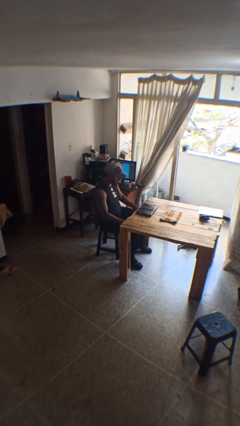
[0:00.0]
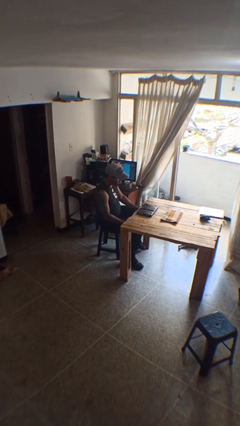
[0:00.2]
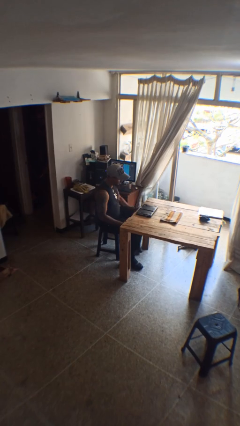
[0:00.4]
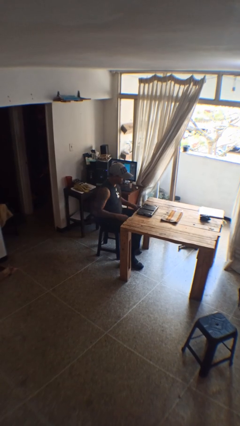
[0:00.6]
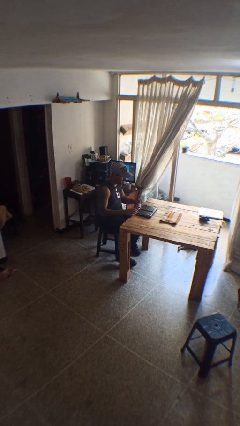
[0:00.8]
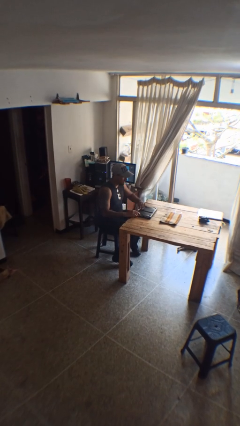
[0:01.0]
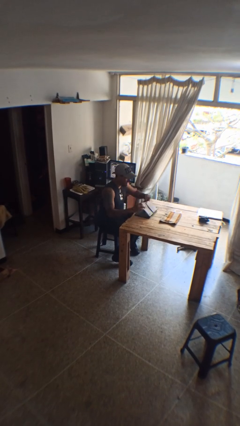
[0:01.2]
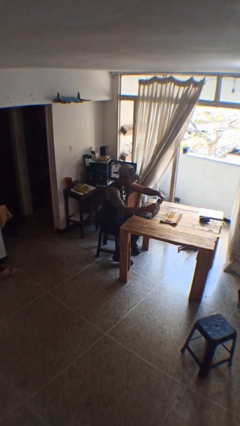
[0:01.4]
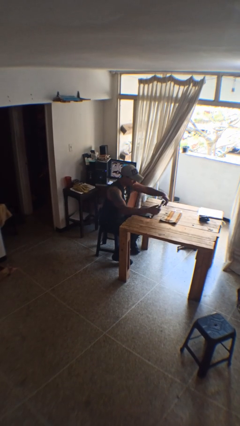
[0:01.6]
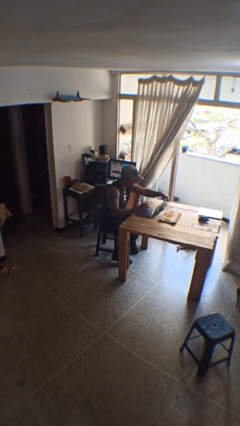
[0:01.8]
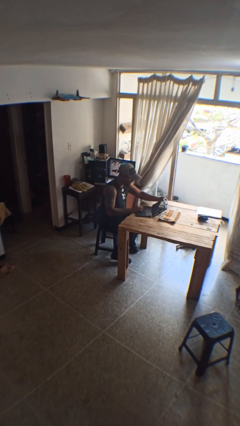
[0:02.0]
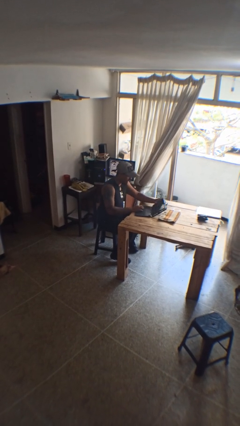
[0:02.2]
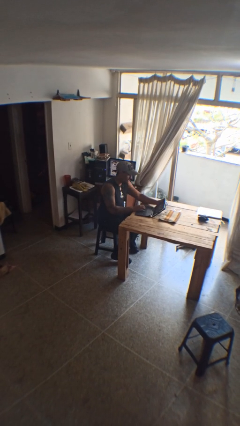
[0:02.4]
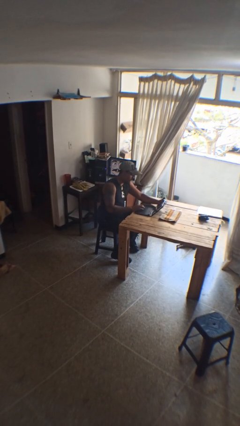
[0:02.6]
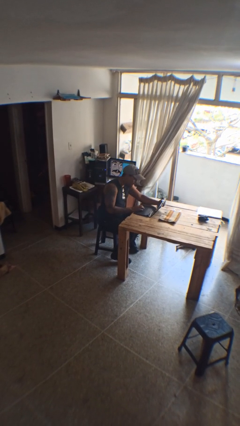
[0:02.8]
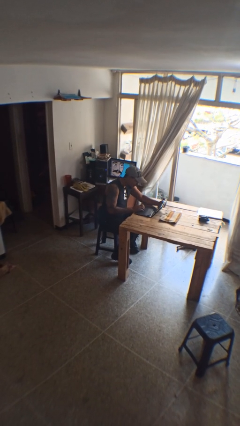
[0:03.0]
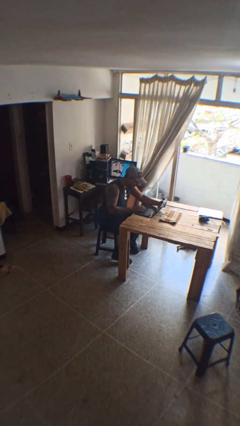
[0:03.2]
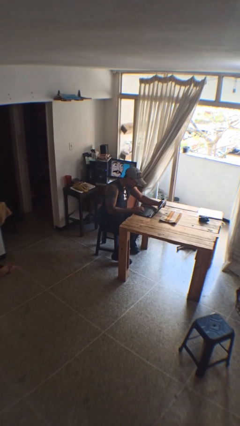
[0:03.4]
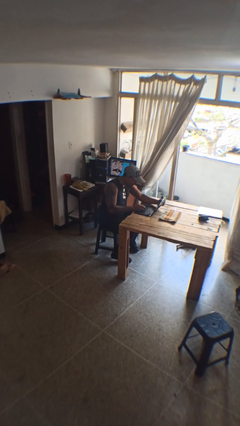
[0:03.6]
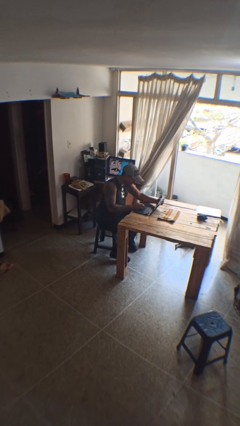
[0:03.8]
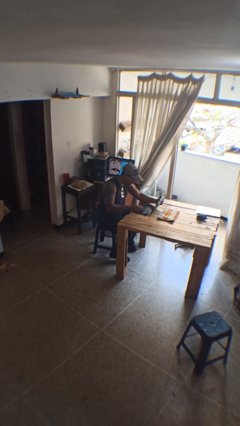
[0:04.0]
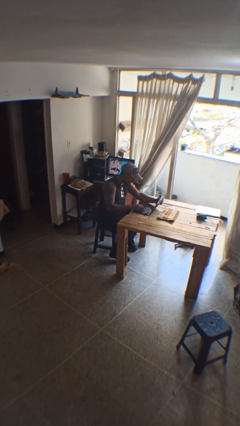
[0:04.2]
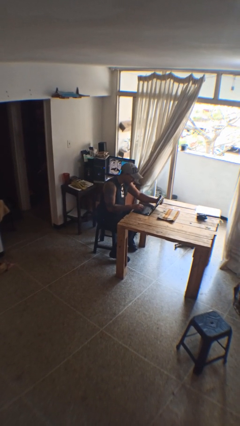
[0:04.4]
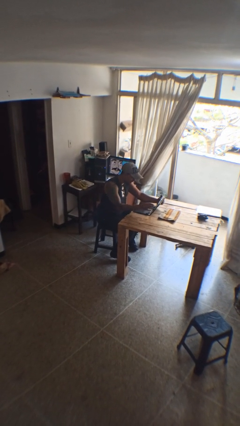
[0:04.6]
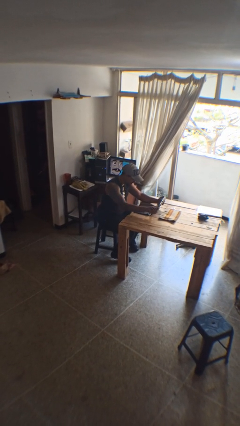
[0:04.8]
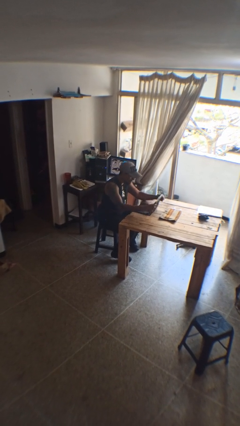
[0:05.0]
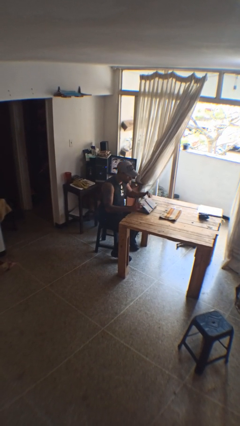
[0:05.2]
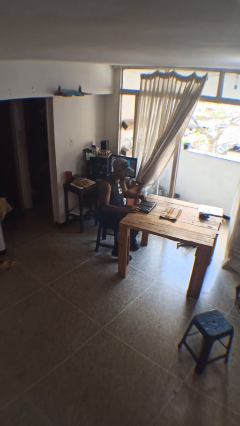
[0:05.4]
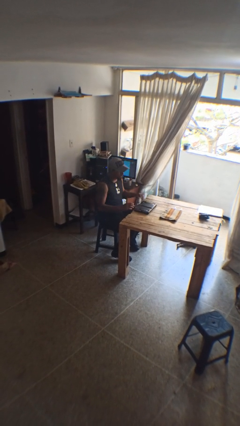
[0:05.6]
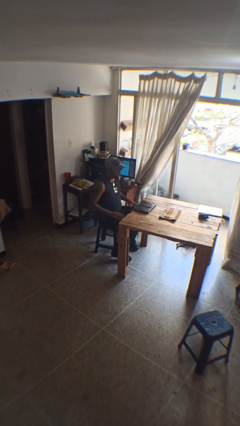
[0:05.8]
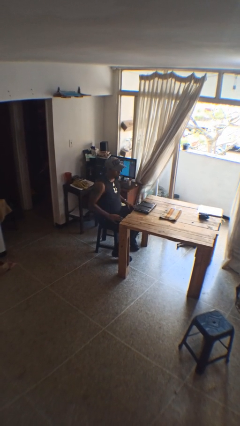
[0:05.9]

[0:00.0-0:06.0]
person interacts with laptop

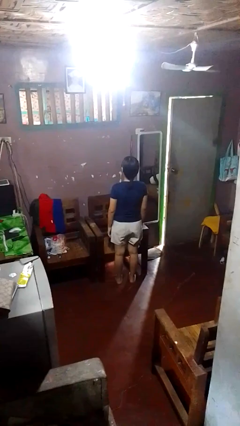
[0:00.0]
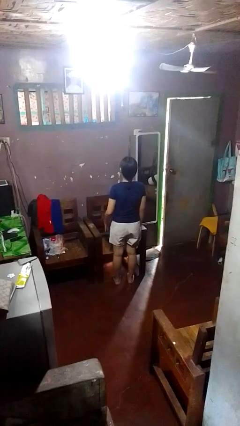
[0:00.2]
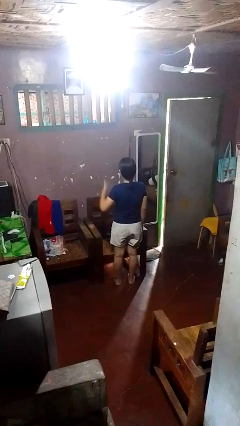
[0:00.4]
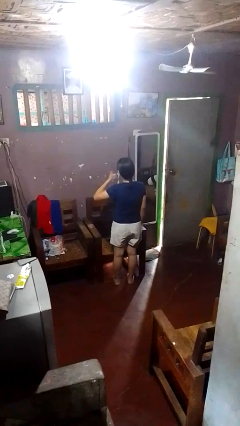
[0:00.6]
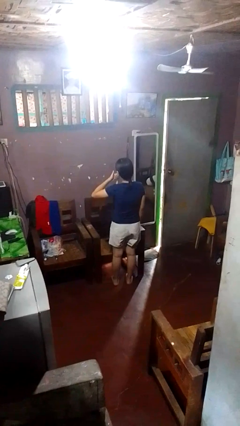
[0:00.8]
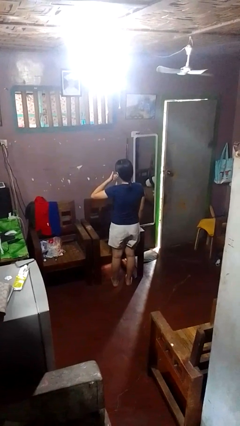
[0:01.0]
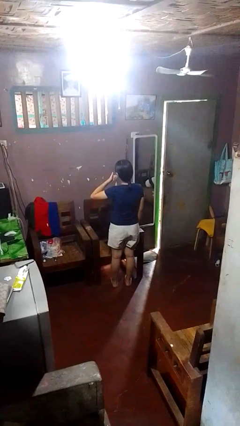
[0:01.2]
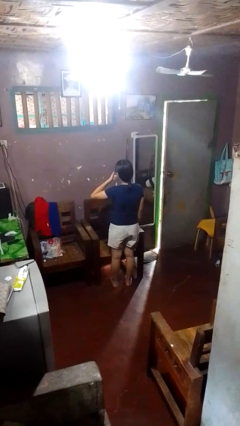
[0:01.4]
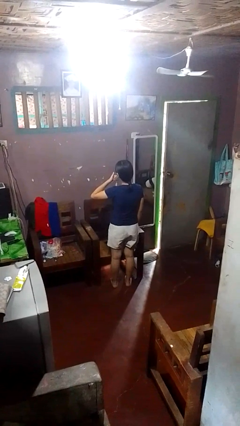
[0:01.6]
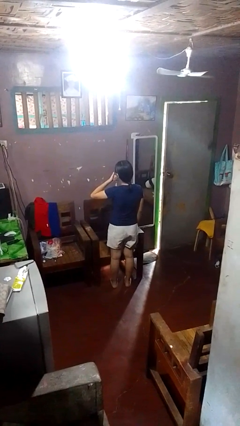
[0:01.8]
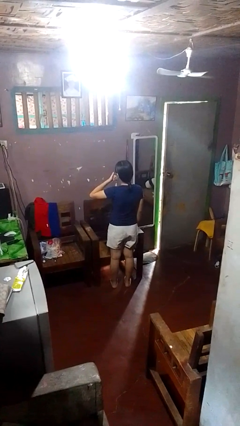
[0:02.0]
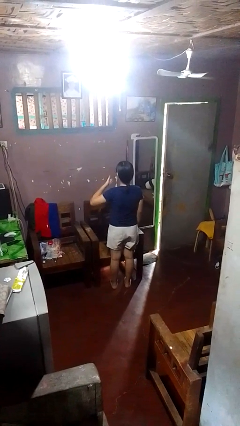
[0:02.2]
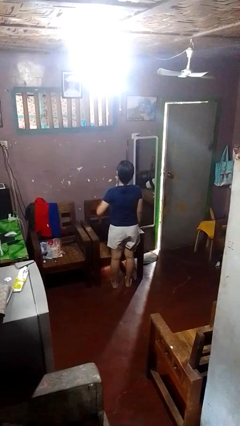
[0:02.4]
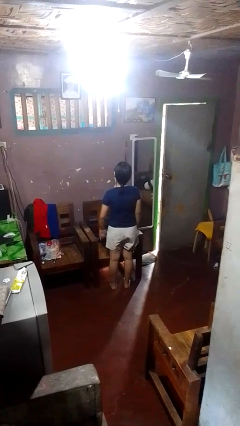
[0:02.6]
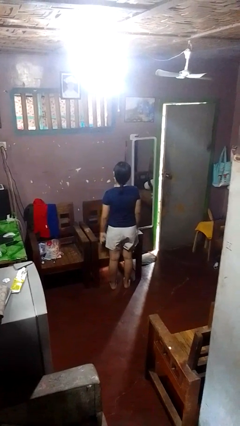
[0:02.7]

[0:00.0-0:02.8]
person gestures call me

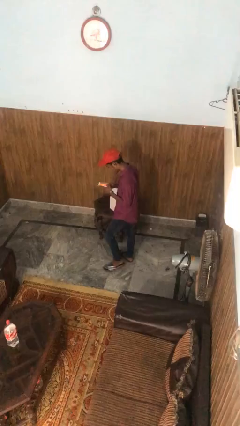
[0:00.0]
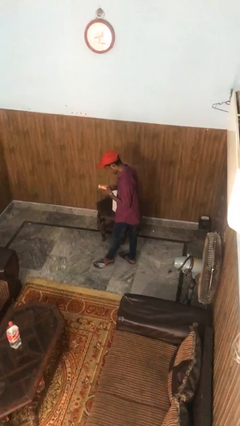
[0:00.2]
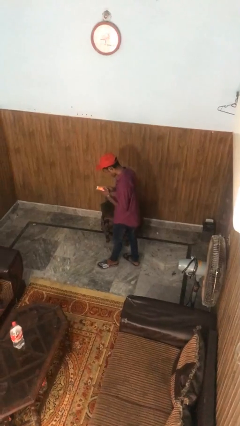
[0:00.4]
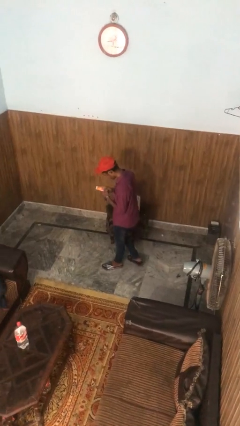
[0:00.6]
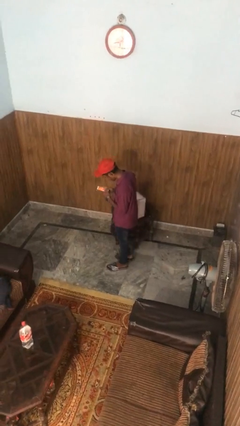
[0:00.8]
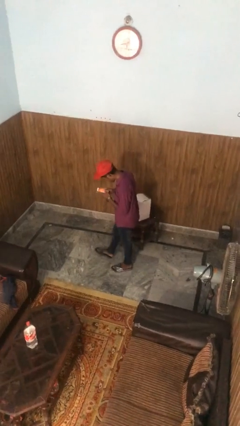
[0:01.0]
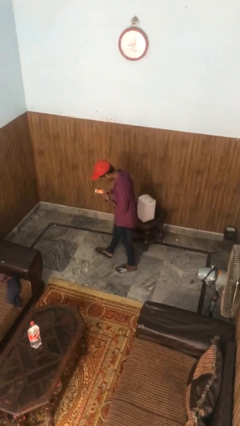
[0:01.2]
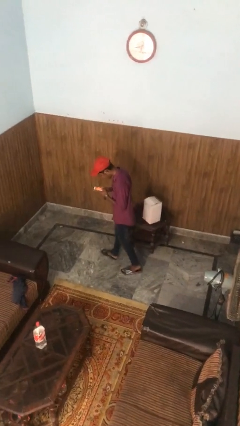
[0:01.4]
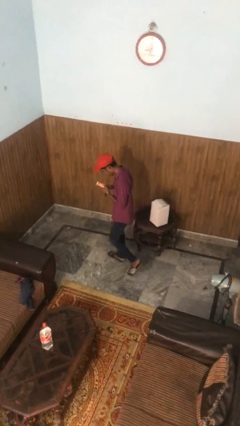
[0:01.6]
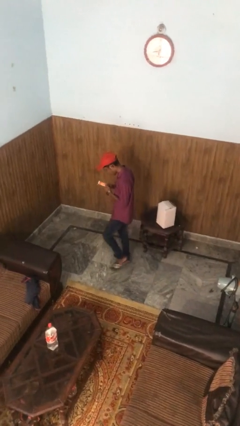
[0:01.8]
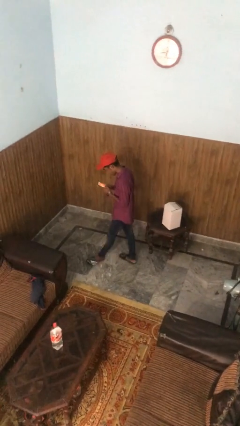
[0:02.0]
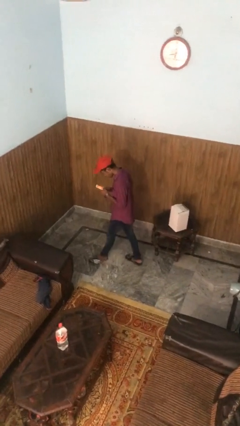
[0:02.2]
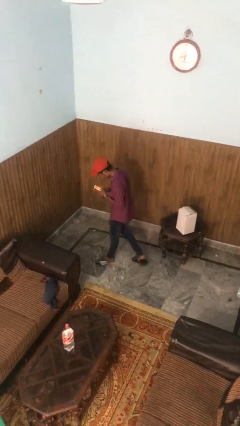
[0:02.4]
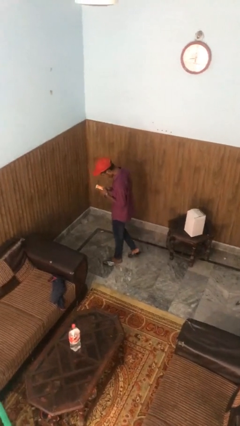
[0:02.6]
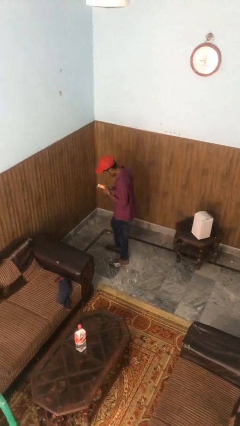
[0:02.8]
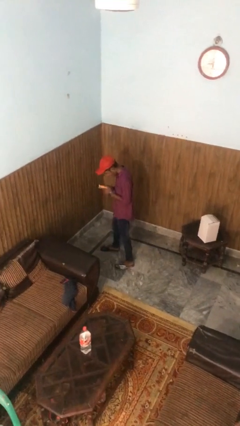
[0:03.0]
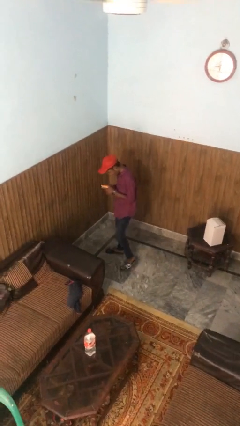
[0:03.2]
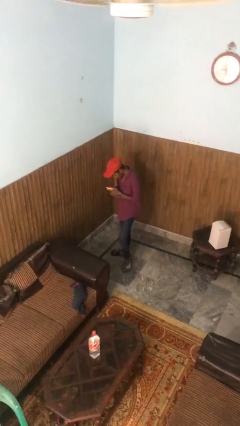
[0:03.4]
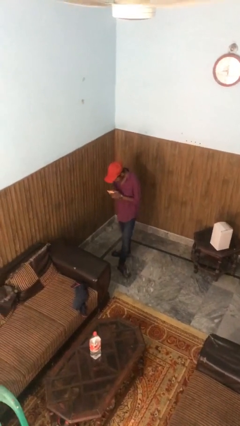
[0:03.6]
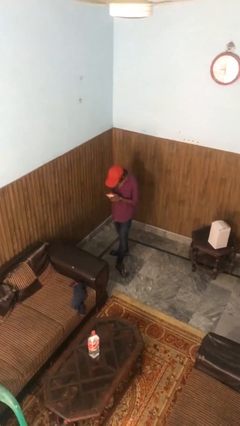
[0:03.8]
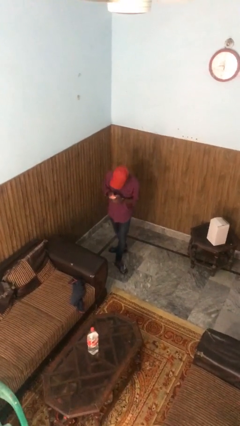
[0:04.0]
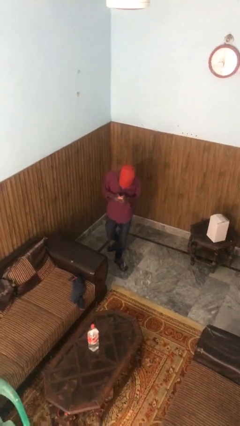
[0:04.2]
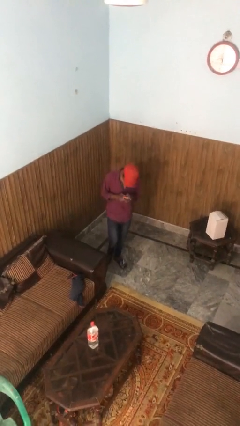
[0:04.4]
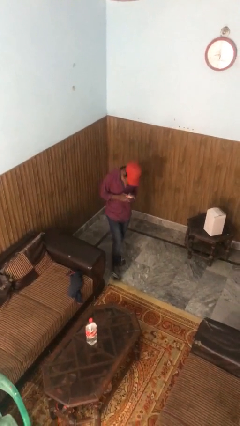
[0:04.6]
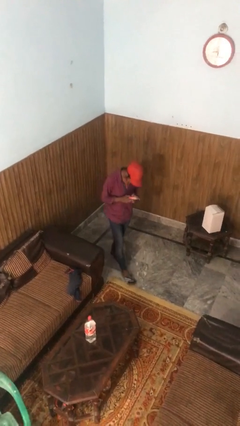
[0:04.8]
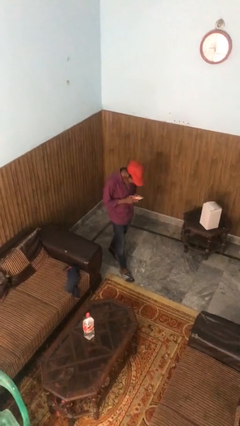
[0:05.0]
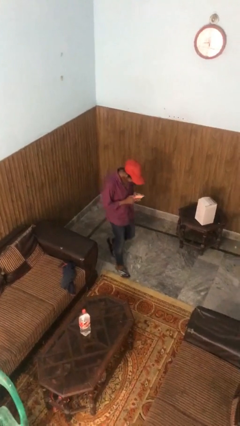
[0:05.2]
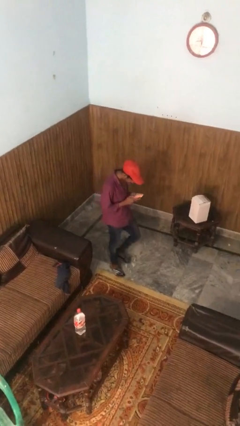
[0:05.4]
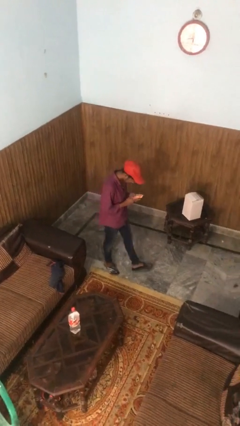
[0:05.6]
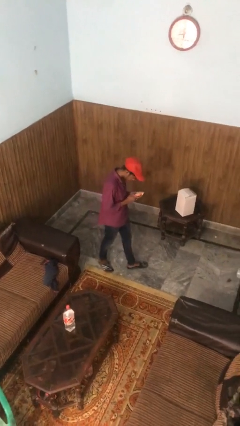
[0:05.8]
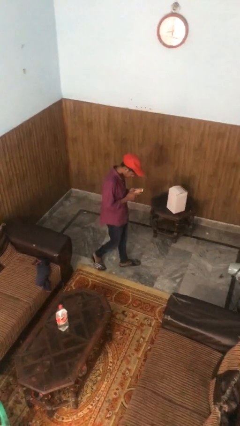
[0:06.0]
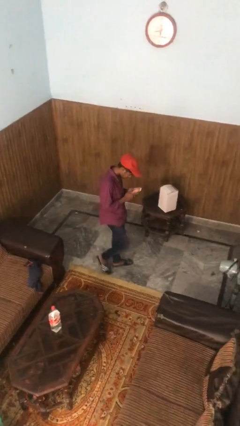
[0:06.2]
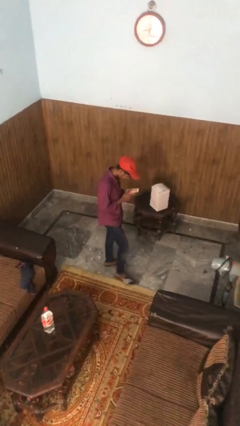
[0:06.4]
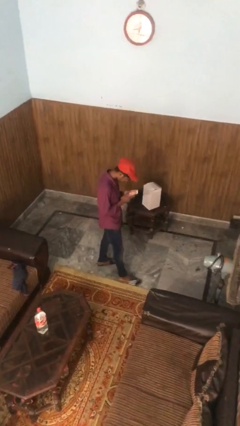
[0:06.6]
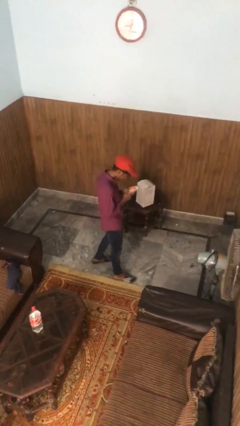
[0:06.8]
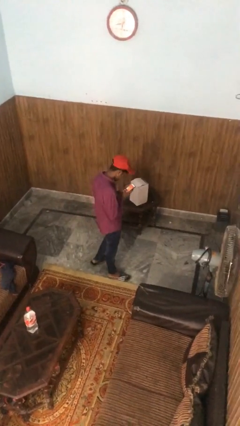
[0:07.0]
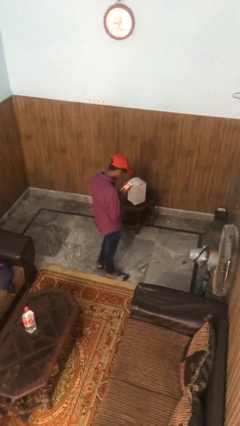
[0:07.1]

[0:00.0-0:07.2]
person texts on phone

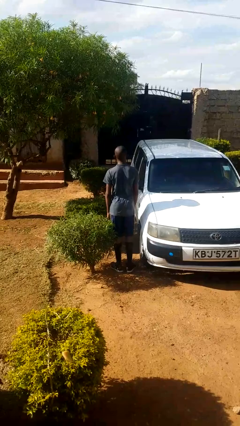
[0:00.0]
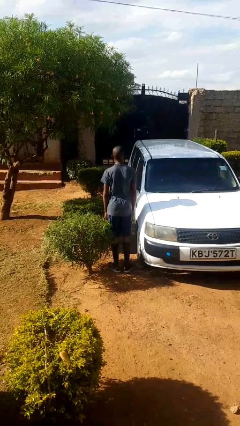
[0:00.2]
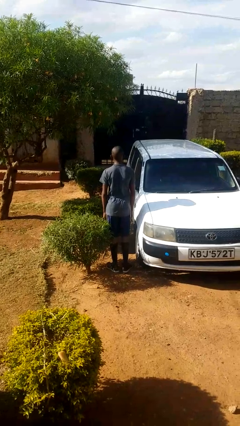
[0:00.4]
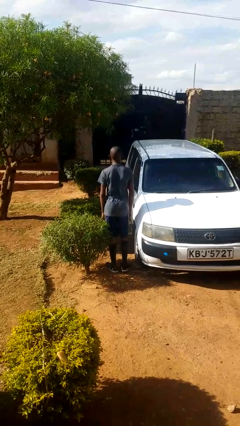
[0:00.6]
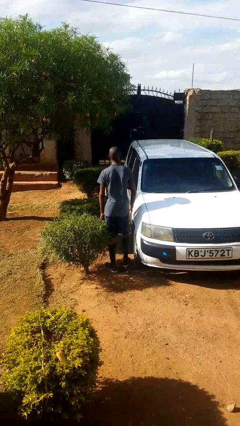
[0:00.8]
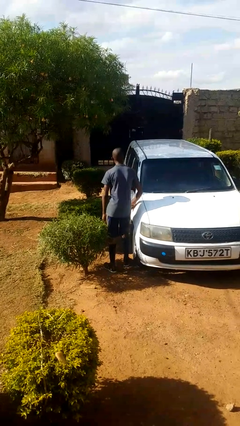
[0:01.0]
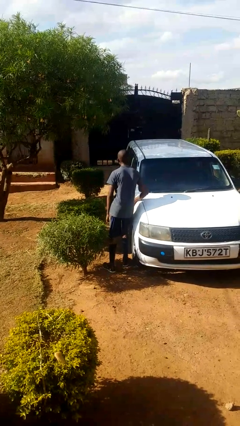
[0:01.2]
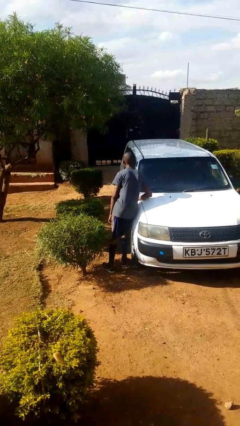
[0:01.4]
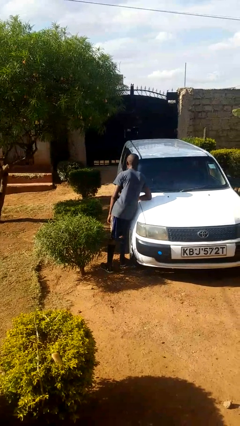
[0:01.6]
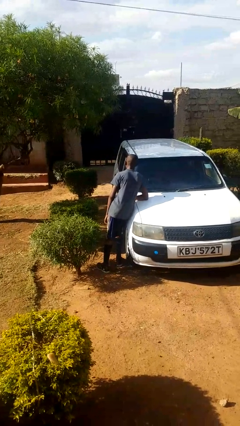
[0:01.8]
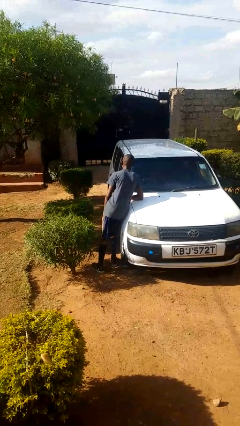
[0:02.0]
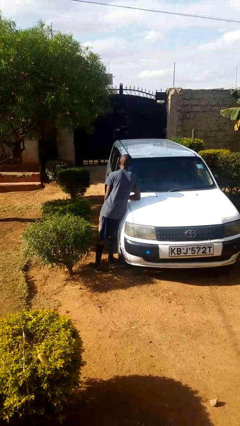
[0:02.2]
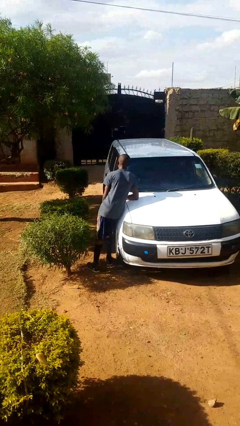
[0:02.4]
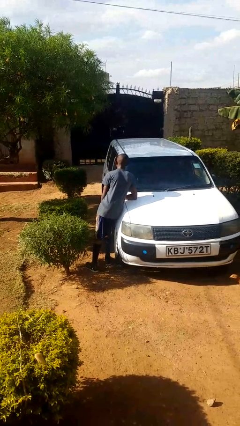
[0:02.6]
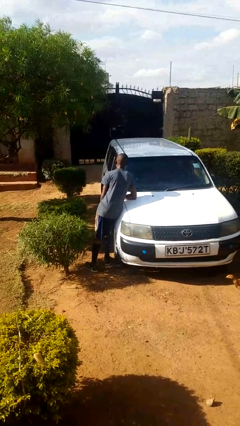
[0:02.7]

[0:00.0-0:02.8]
person leans against car
